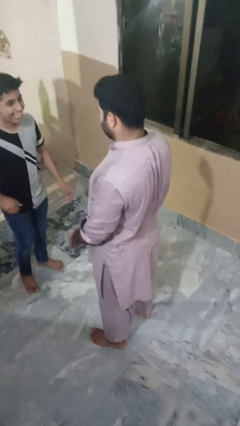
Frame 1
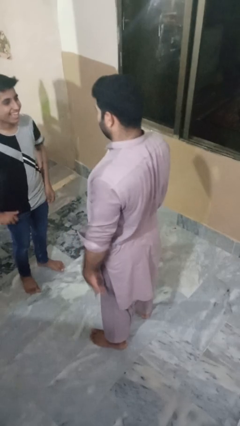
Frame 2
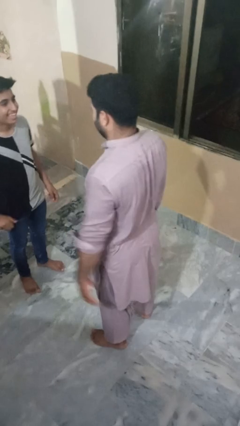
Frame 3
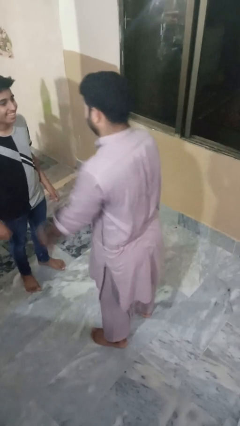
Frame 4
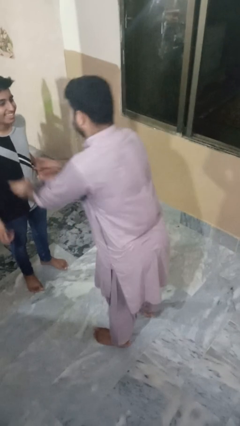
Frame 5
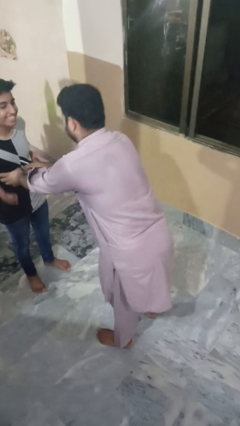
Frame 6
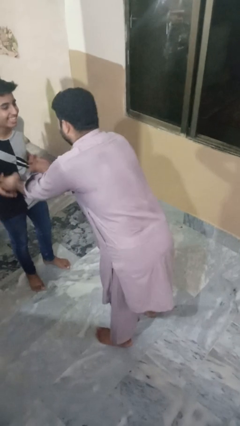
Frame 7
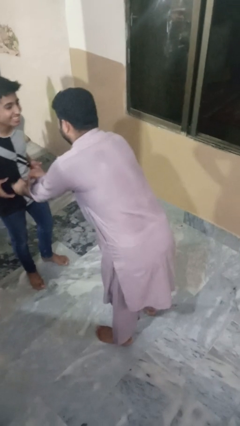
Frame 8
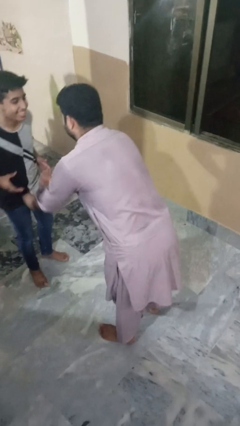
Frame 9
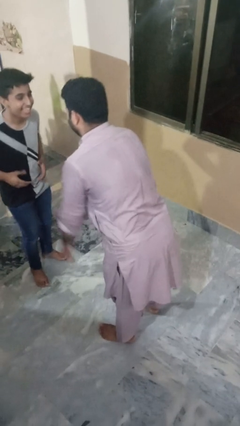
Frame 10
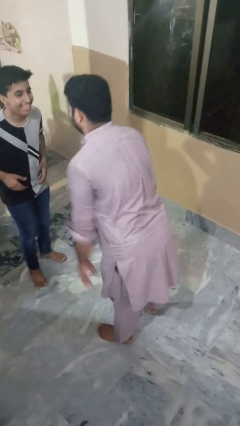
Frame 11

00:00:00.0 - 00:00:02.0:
person tickles person

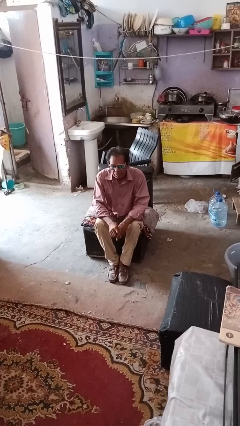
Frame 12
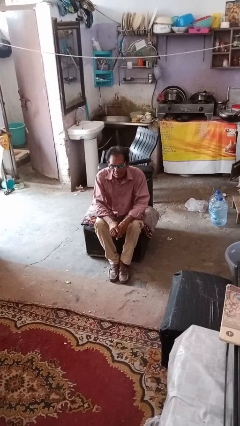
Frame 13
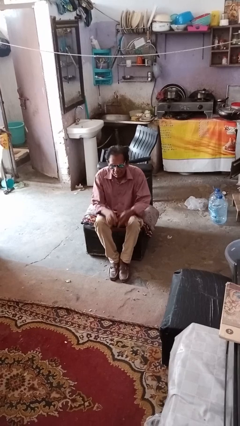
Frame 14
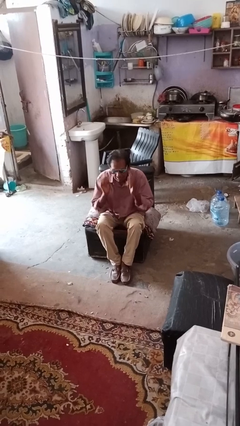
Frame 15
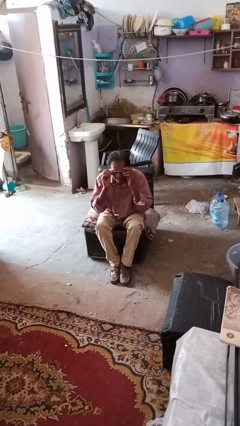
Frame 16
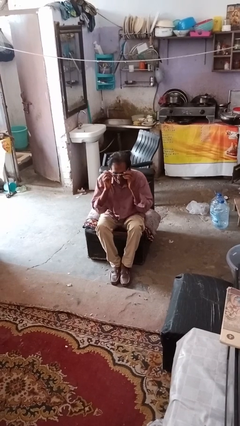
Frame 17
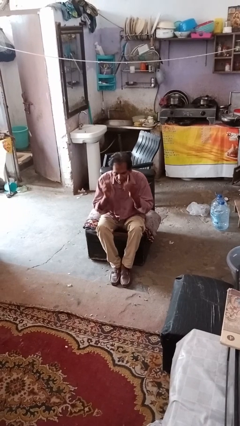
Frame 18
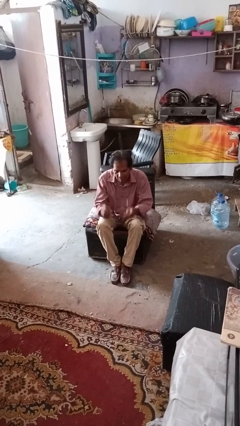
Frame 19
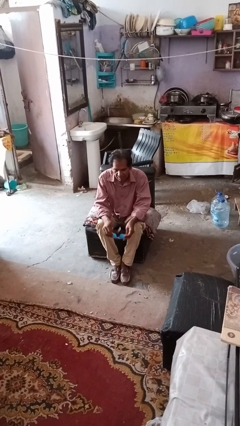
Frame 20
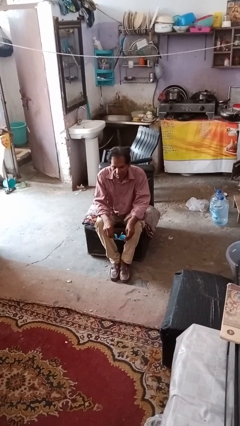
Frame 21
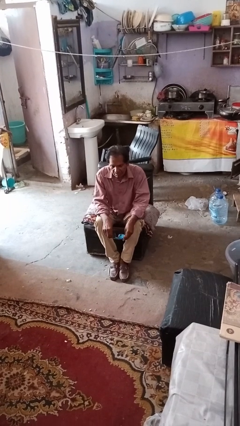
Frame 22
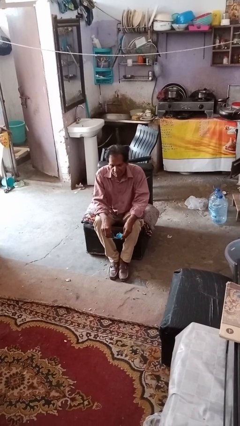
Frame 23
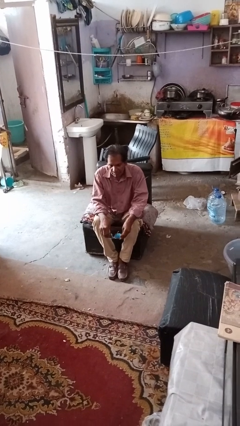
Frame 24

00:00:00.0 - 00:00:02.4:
person takes off sunglasses

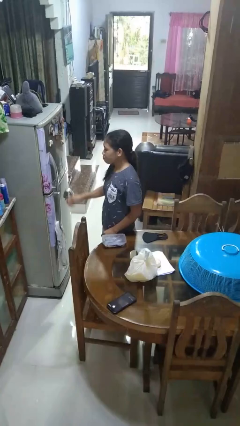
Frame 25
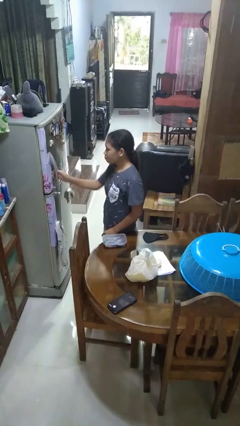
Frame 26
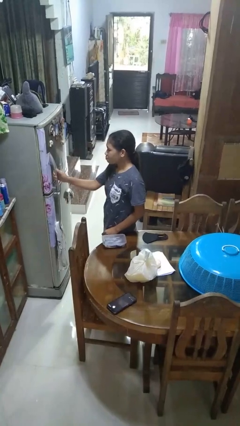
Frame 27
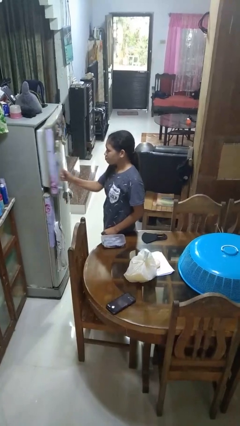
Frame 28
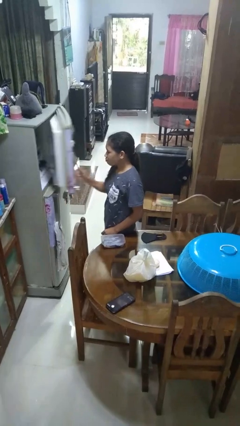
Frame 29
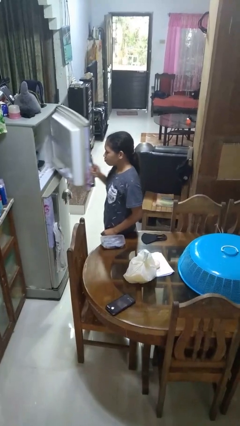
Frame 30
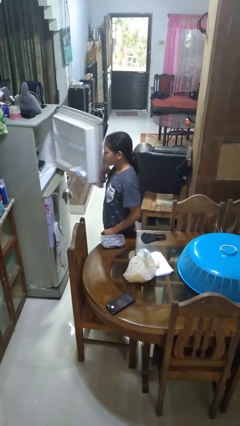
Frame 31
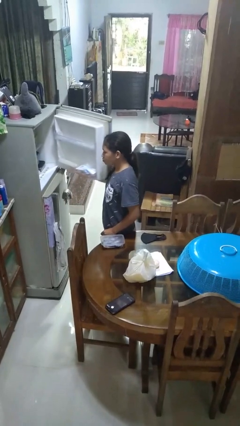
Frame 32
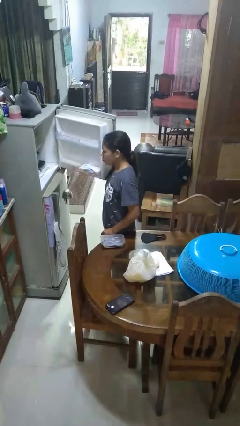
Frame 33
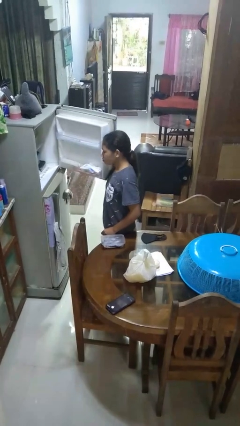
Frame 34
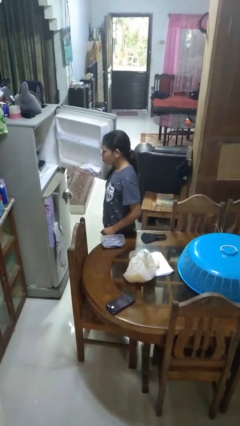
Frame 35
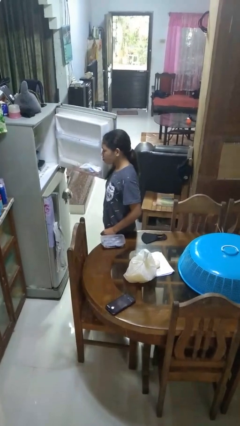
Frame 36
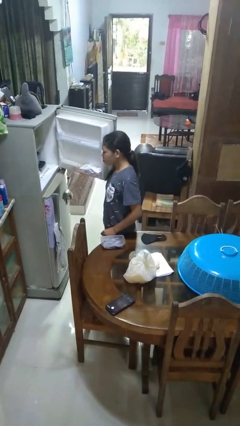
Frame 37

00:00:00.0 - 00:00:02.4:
person opens refrigerator

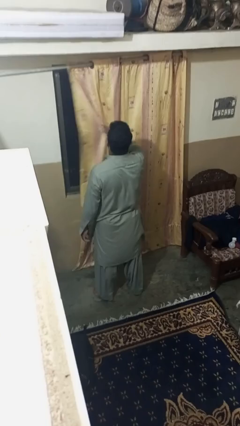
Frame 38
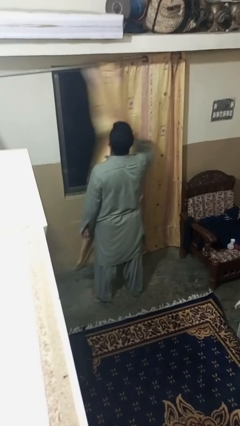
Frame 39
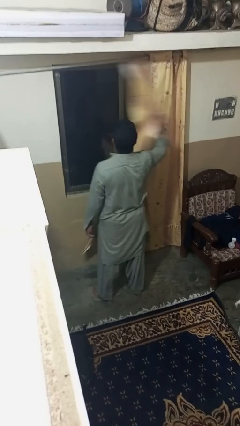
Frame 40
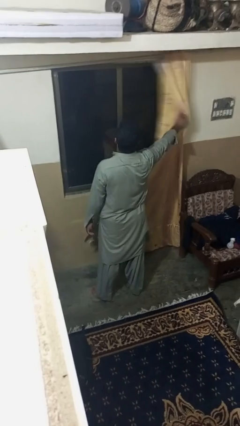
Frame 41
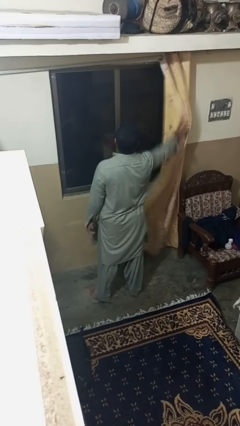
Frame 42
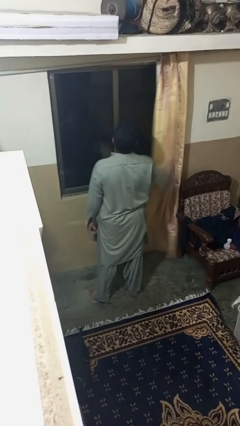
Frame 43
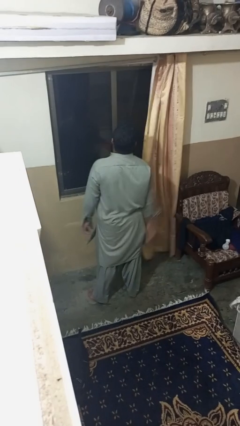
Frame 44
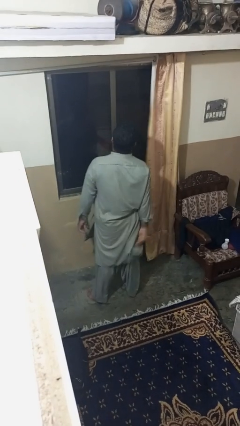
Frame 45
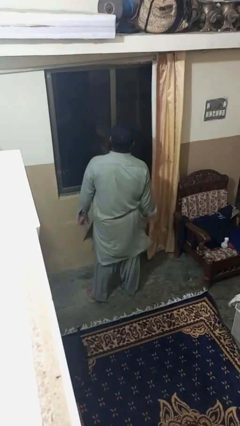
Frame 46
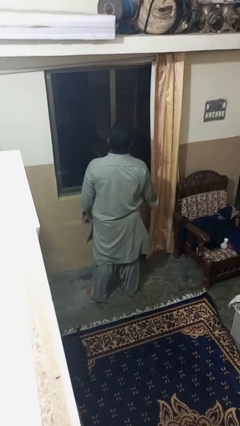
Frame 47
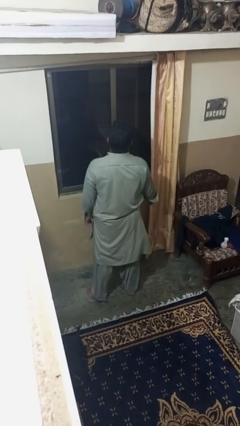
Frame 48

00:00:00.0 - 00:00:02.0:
person opens curtains

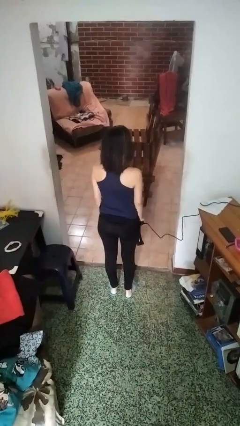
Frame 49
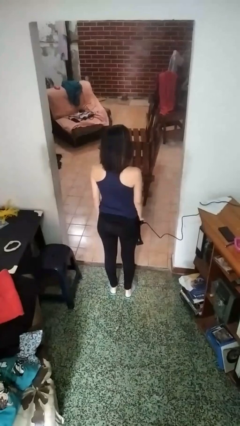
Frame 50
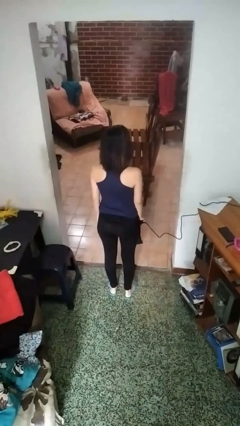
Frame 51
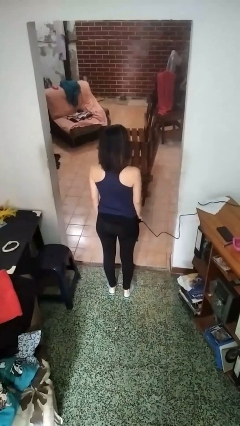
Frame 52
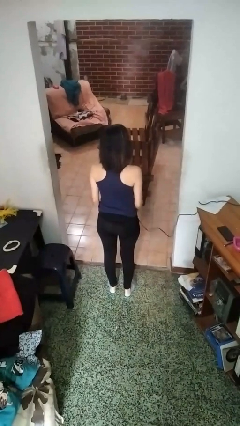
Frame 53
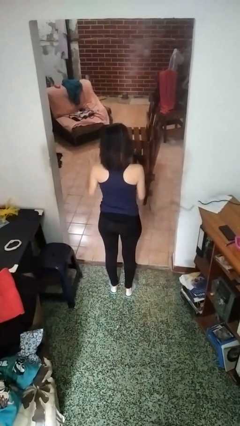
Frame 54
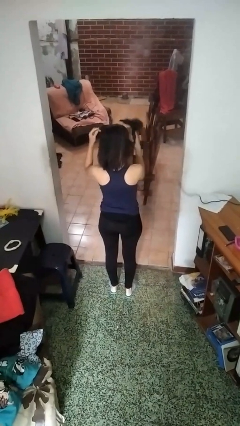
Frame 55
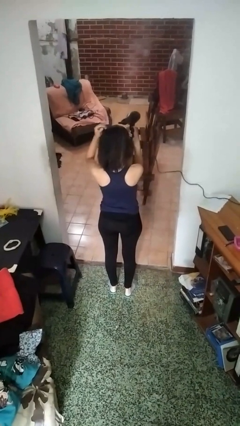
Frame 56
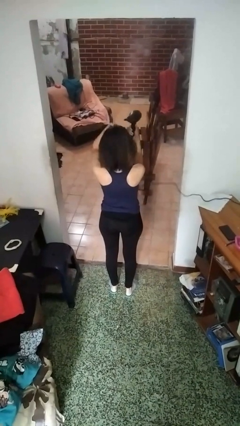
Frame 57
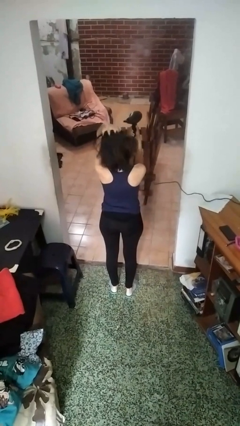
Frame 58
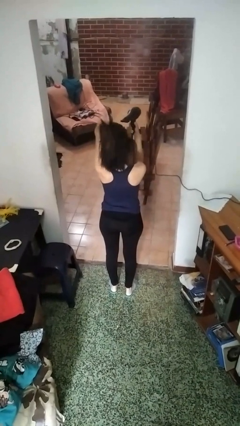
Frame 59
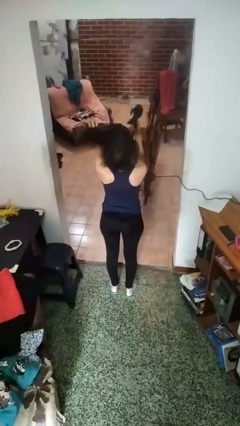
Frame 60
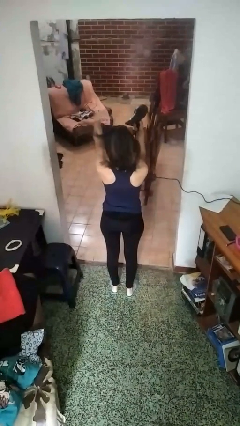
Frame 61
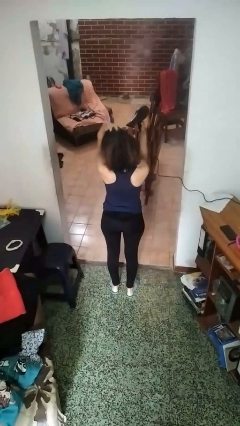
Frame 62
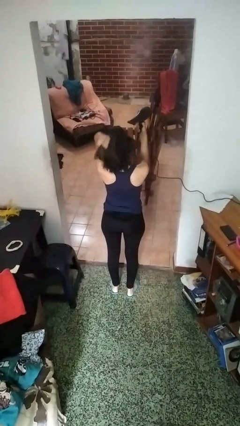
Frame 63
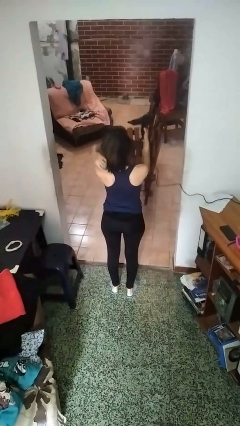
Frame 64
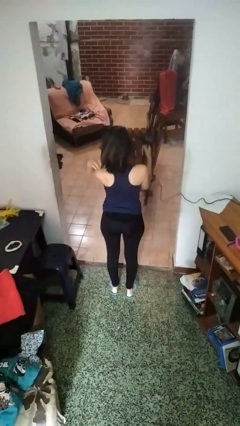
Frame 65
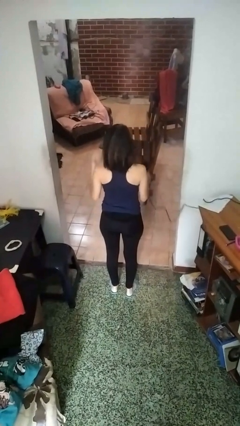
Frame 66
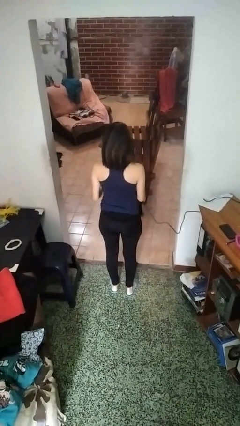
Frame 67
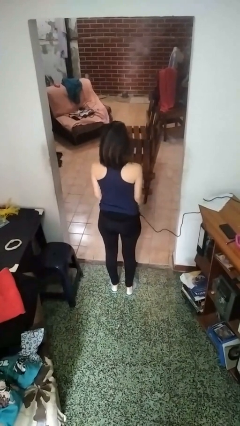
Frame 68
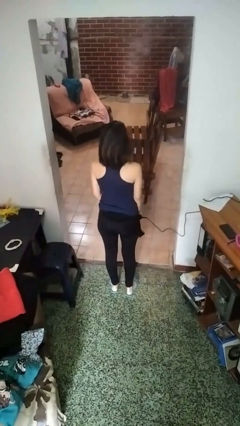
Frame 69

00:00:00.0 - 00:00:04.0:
person dries hair with hairdryer

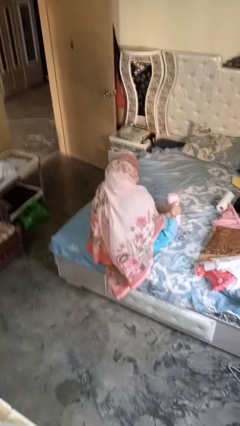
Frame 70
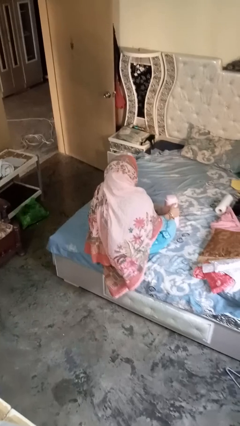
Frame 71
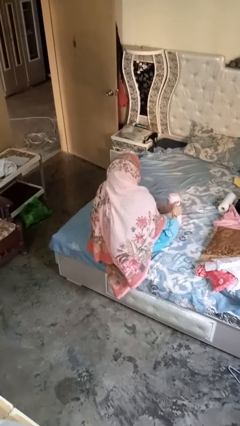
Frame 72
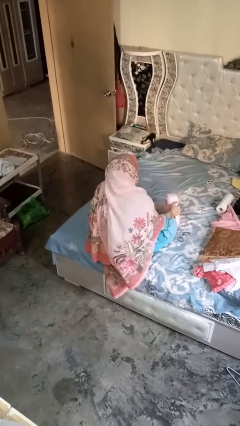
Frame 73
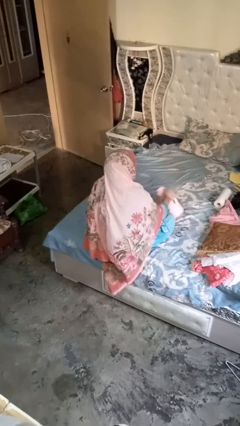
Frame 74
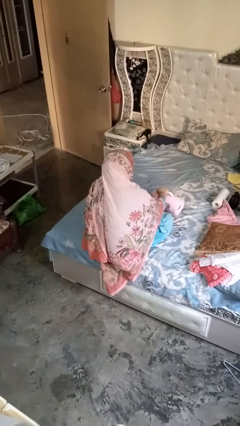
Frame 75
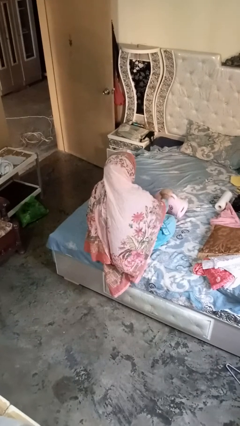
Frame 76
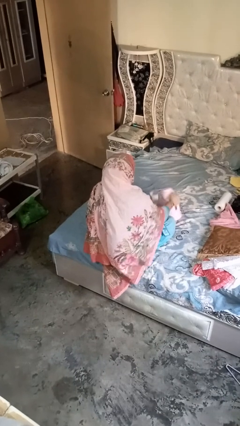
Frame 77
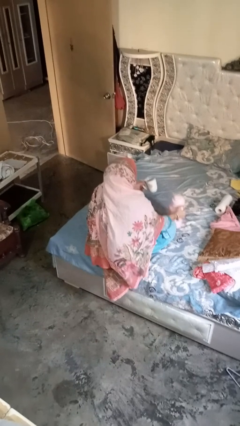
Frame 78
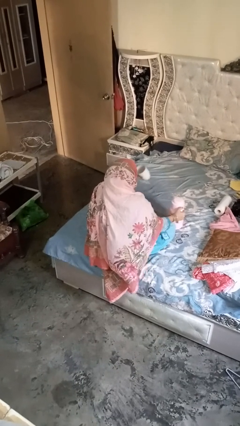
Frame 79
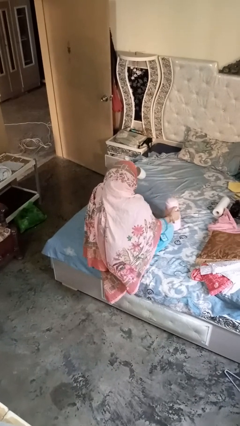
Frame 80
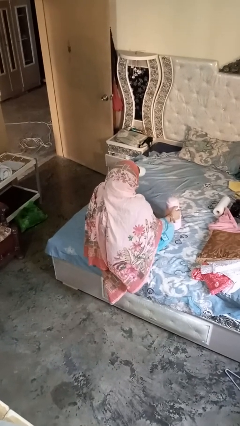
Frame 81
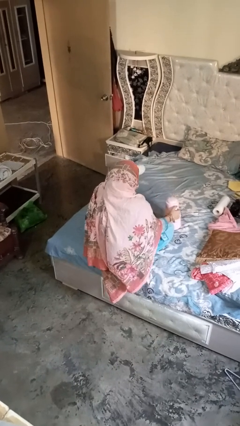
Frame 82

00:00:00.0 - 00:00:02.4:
person pours coffee into mug

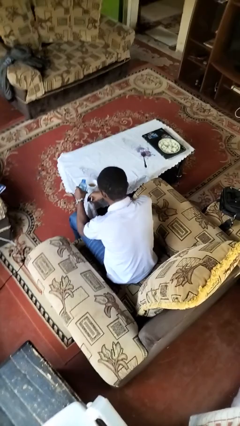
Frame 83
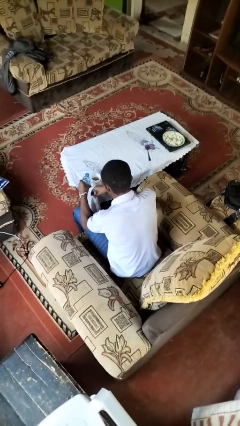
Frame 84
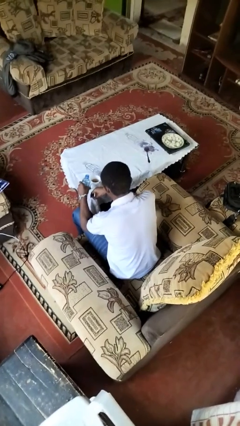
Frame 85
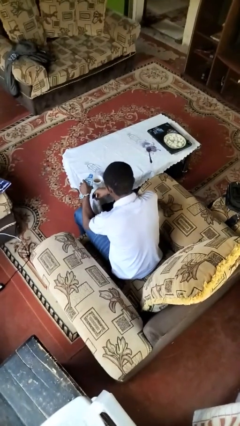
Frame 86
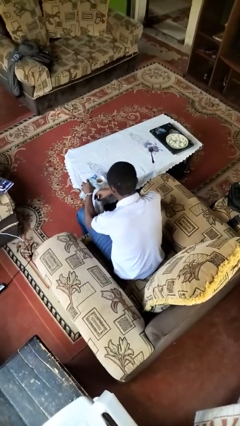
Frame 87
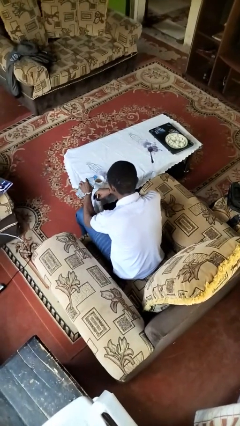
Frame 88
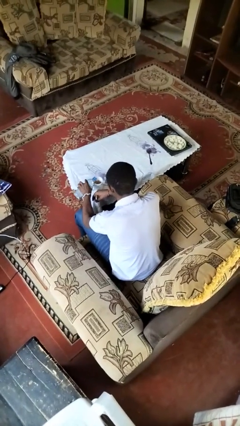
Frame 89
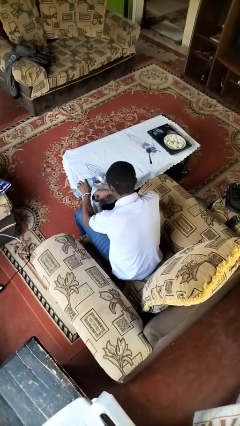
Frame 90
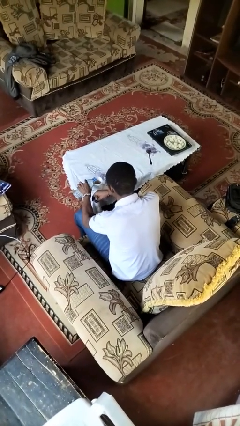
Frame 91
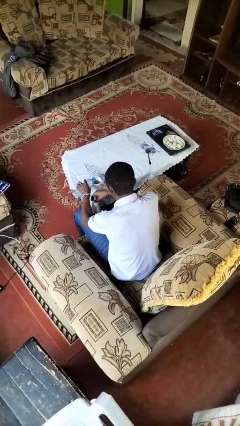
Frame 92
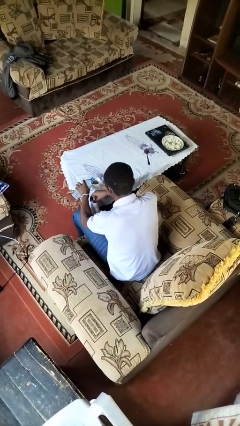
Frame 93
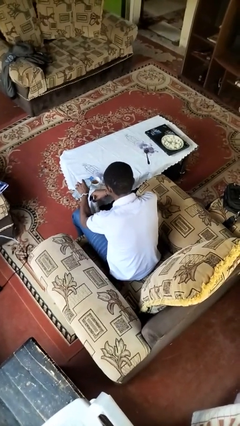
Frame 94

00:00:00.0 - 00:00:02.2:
person pours liquid into cup
